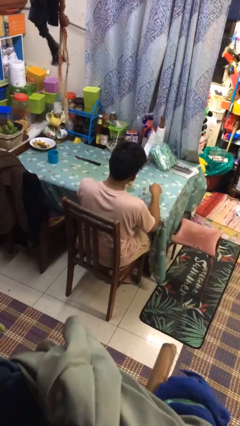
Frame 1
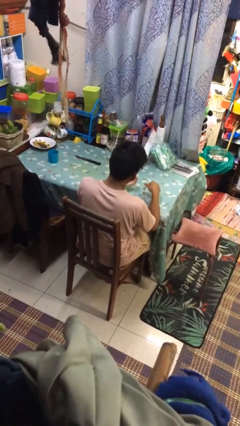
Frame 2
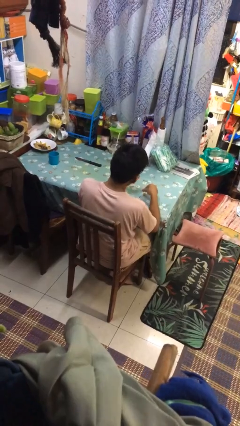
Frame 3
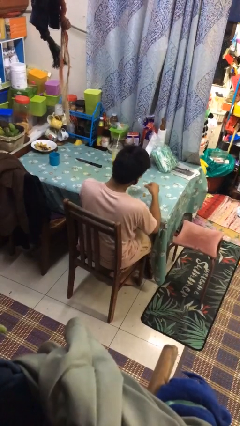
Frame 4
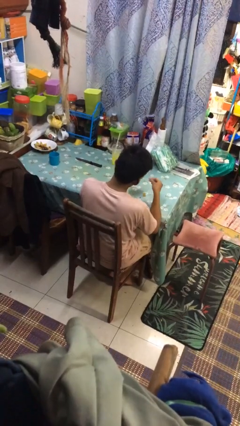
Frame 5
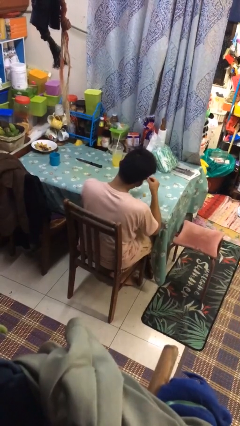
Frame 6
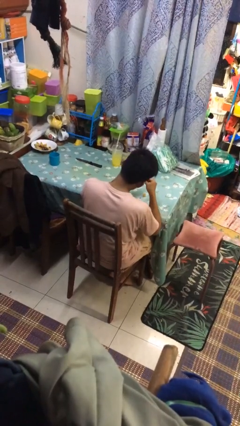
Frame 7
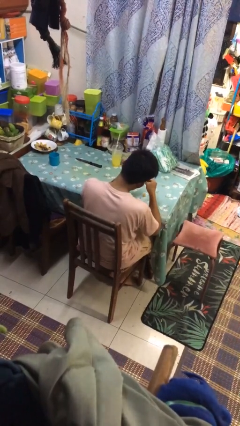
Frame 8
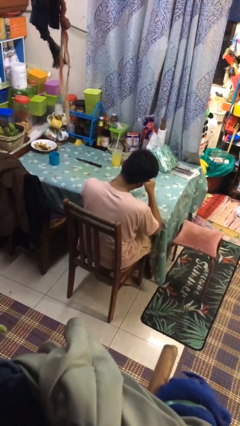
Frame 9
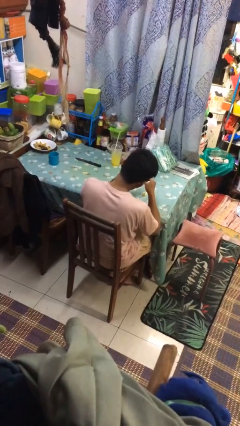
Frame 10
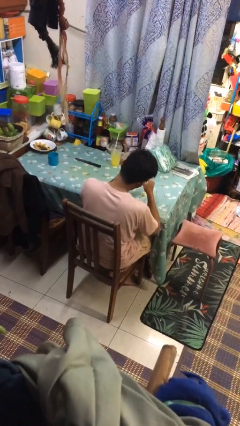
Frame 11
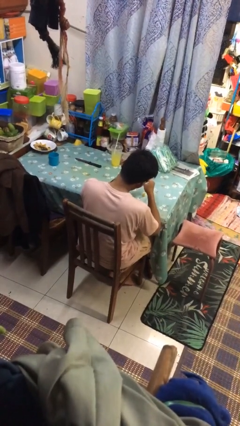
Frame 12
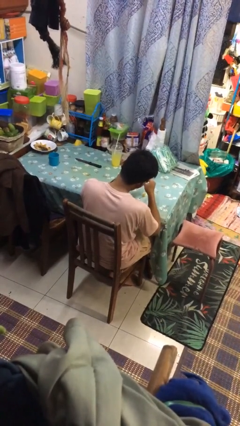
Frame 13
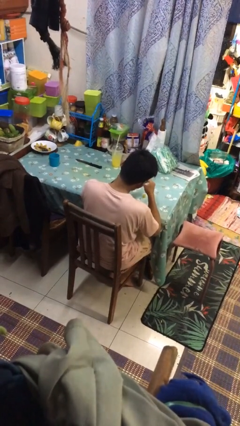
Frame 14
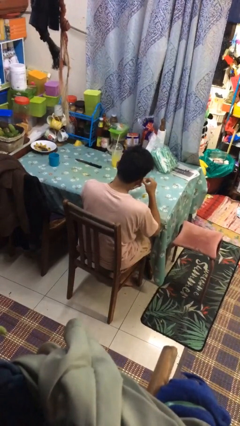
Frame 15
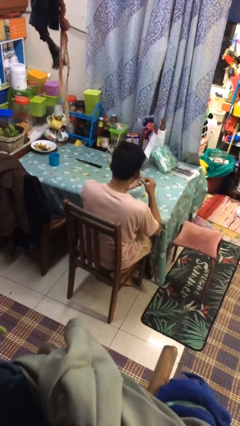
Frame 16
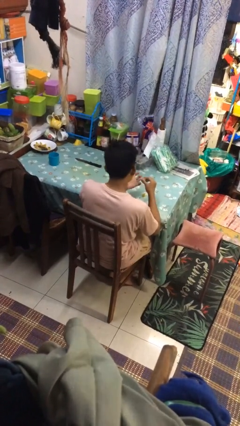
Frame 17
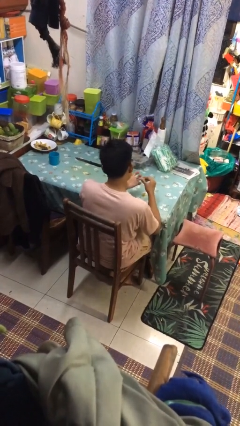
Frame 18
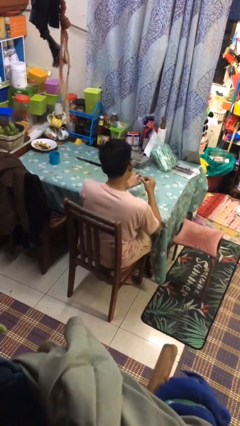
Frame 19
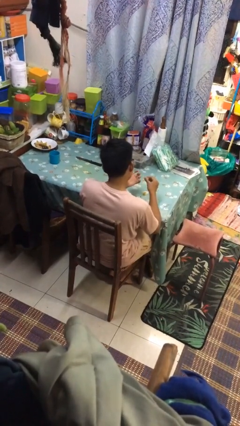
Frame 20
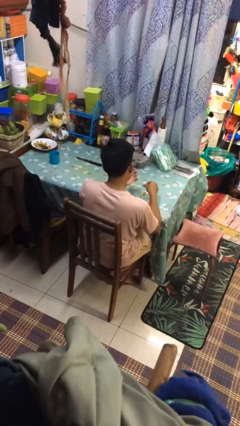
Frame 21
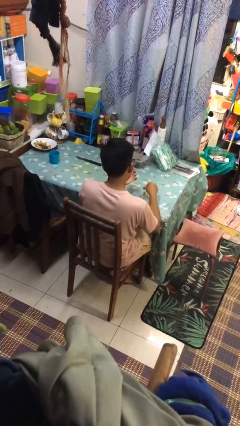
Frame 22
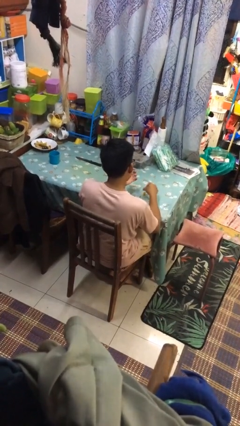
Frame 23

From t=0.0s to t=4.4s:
person paints fingernails

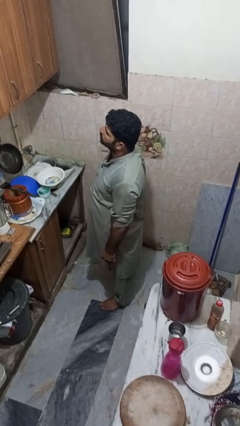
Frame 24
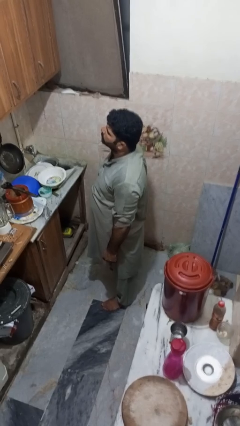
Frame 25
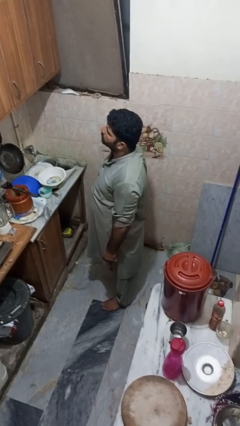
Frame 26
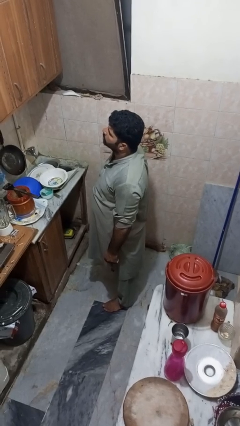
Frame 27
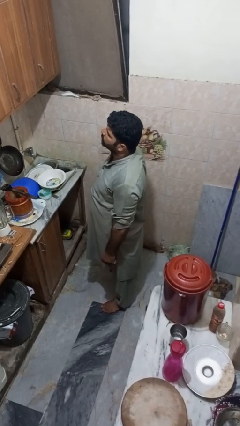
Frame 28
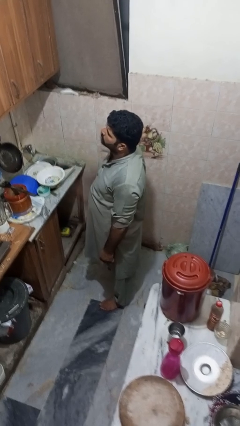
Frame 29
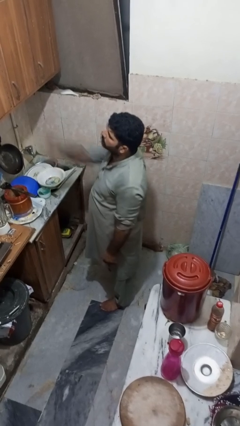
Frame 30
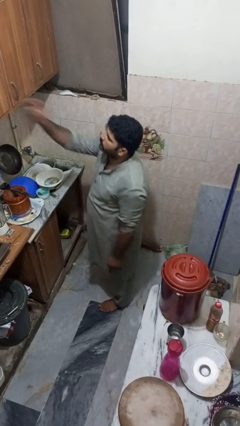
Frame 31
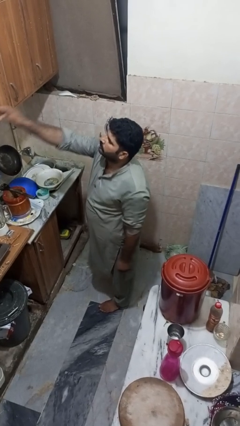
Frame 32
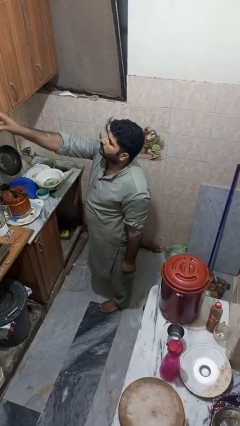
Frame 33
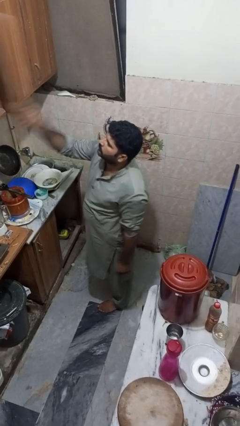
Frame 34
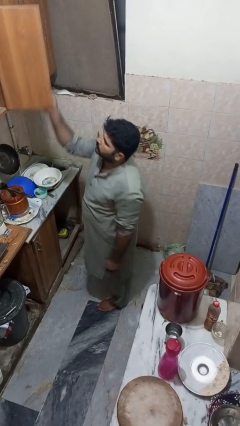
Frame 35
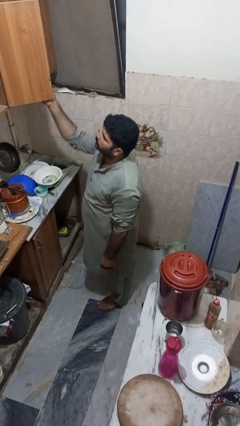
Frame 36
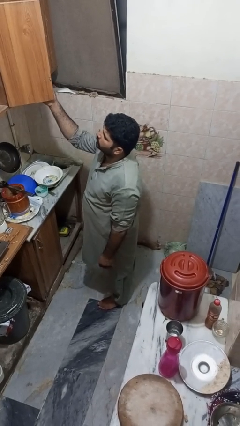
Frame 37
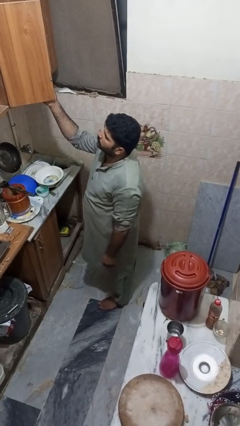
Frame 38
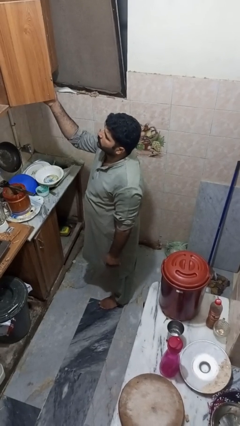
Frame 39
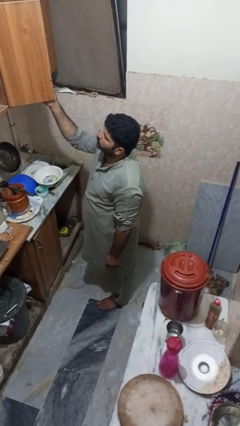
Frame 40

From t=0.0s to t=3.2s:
person opens cabinet

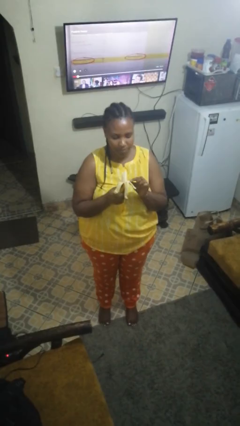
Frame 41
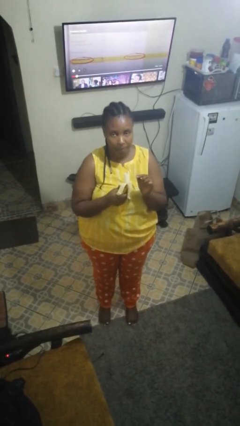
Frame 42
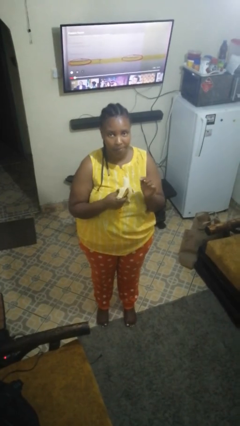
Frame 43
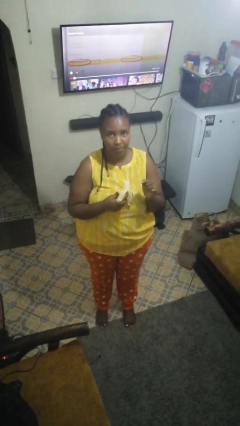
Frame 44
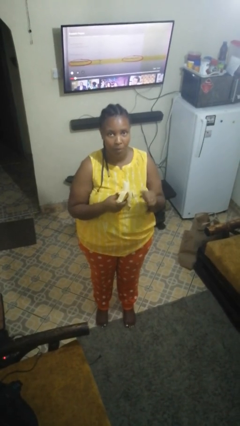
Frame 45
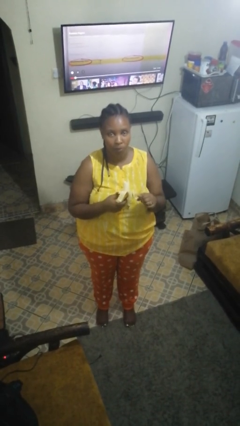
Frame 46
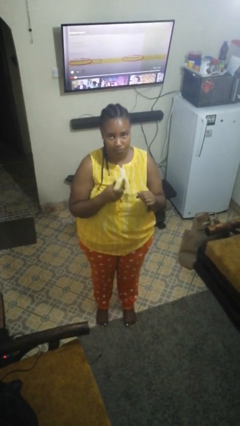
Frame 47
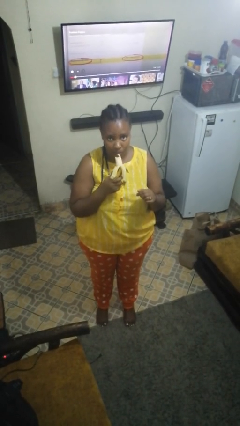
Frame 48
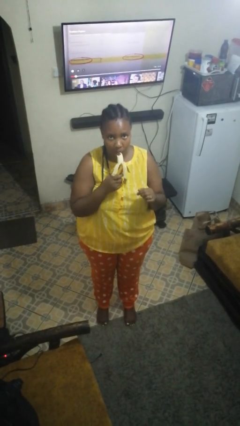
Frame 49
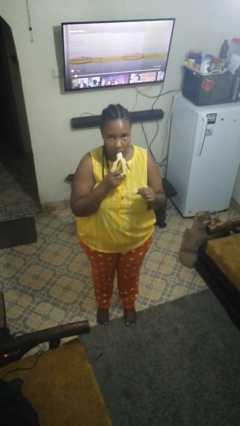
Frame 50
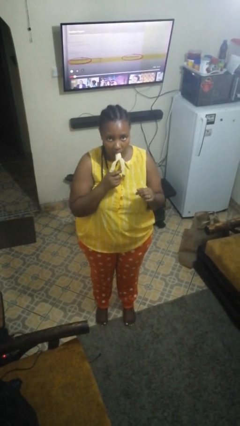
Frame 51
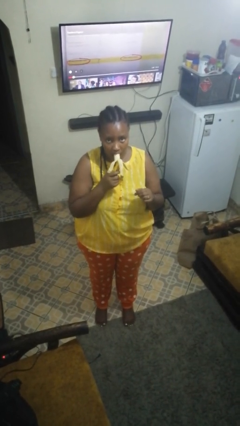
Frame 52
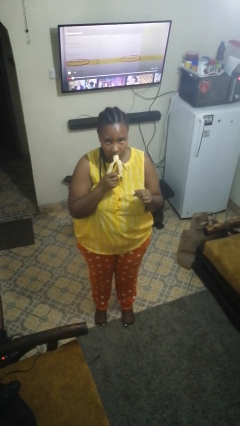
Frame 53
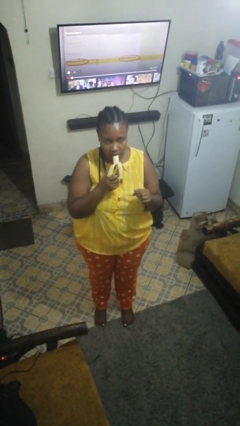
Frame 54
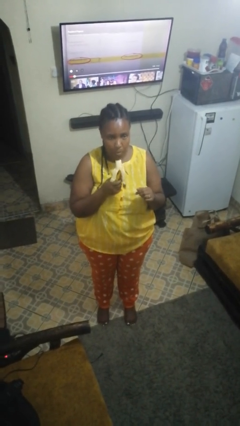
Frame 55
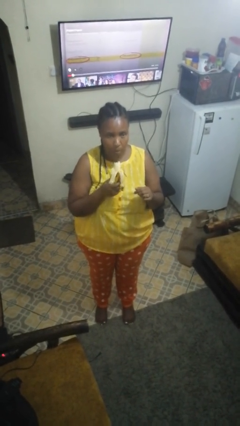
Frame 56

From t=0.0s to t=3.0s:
person eats banana

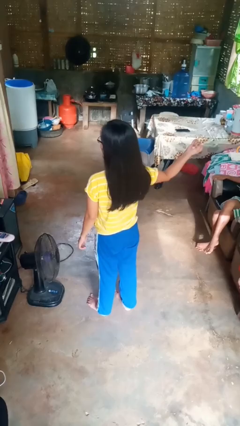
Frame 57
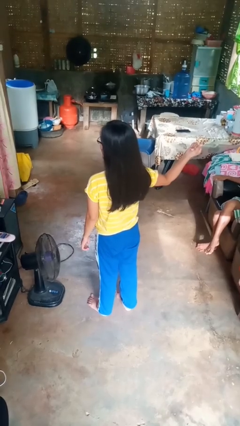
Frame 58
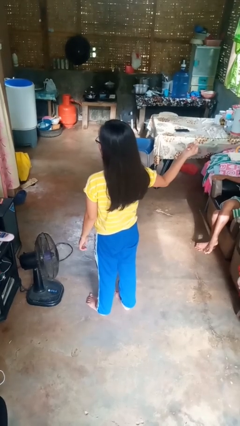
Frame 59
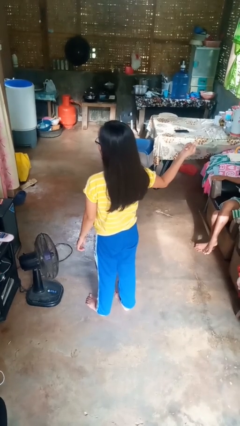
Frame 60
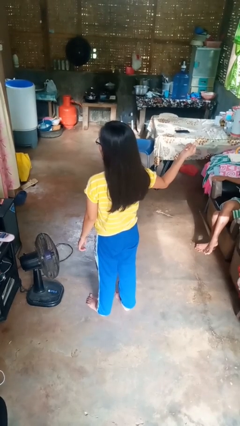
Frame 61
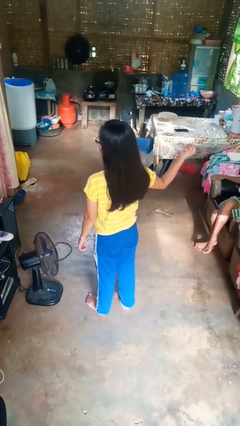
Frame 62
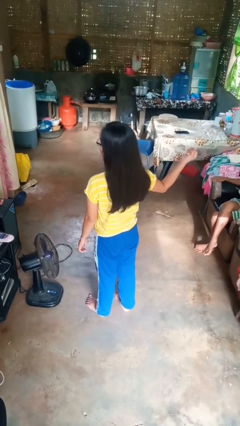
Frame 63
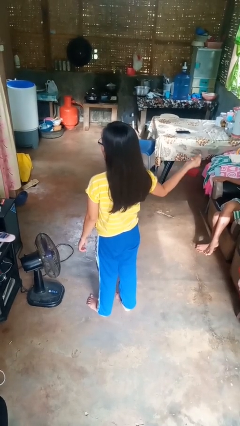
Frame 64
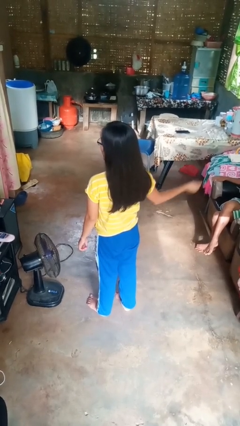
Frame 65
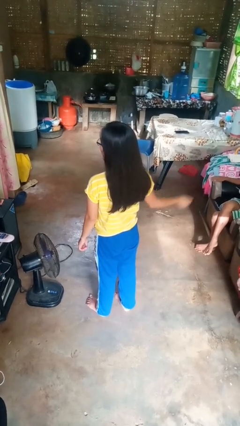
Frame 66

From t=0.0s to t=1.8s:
person snaps fingers

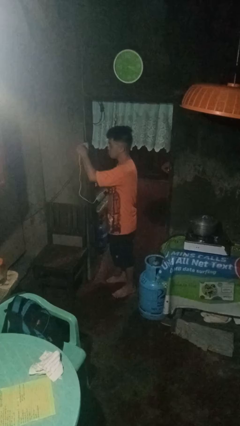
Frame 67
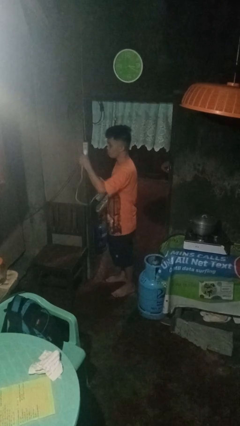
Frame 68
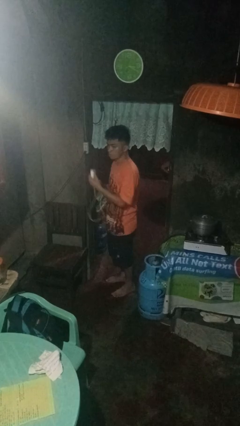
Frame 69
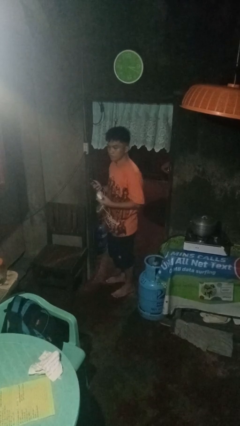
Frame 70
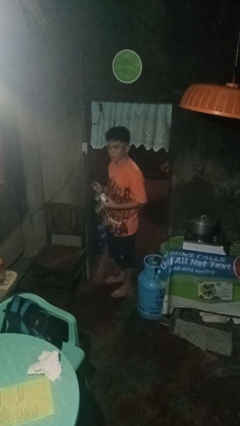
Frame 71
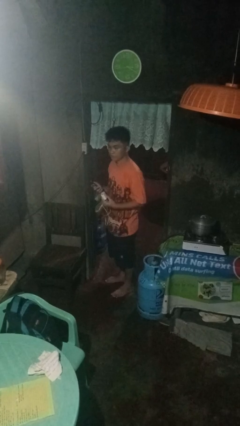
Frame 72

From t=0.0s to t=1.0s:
person unplugs from electrical socket

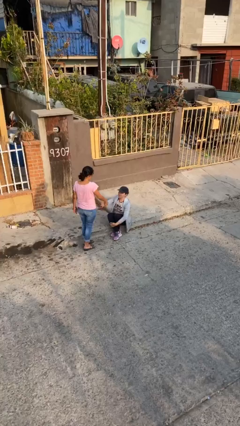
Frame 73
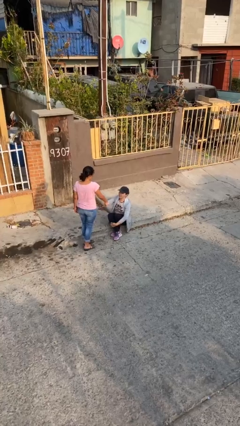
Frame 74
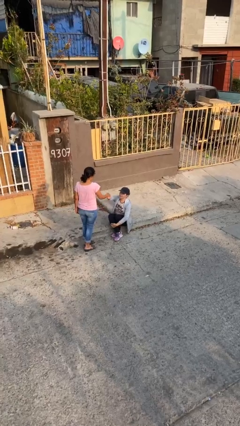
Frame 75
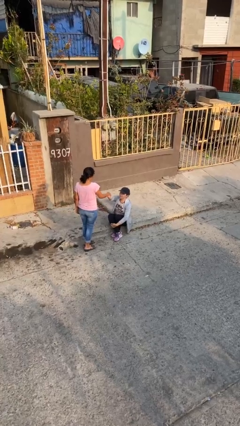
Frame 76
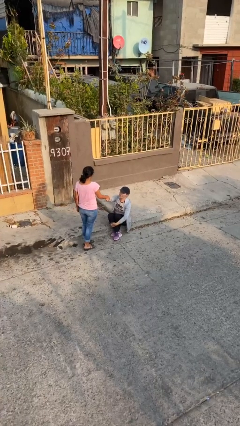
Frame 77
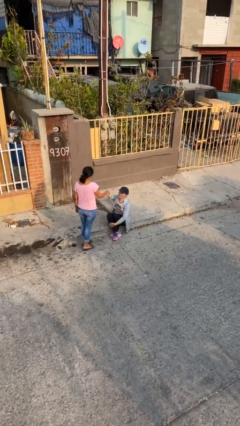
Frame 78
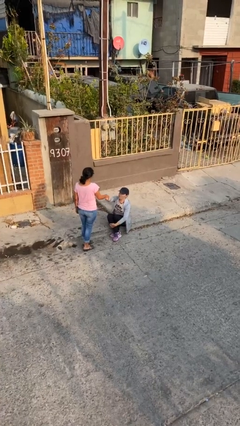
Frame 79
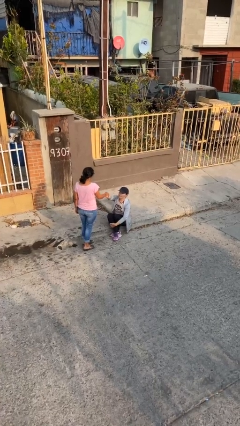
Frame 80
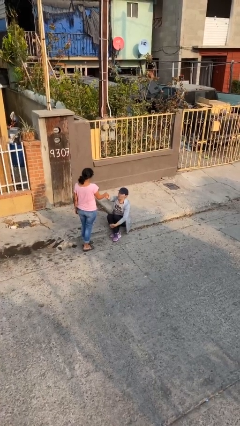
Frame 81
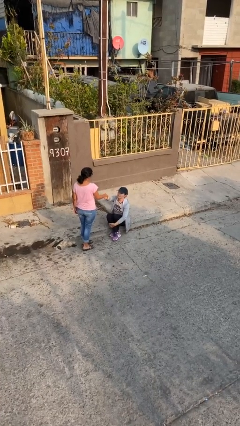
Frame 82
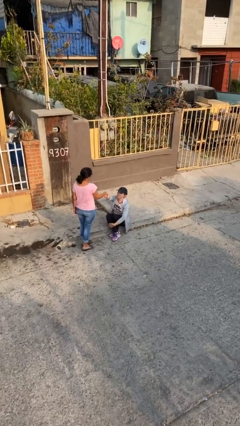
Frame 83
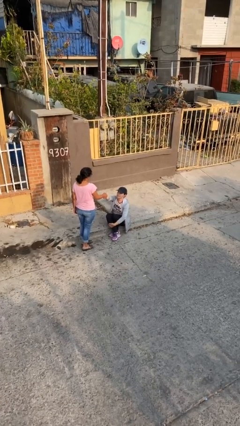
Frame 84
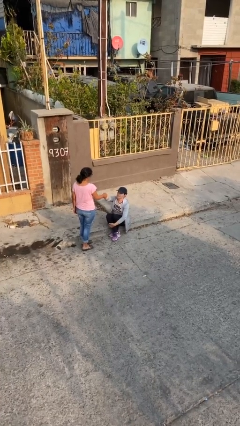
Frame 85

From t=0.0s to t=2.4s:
person shakes hand

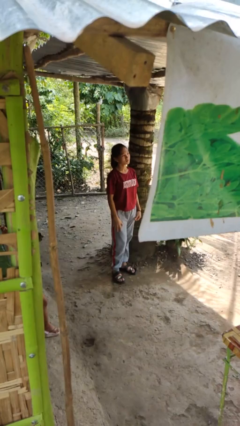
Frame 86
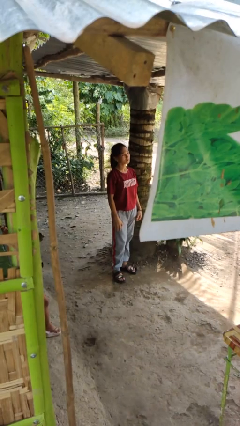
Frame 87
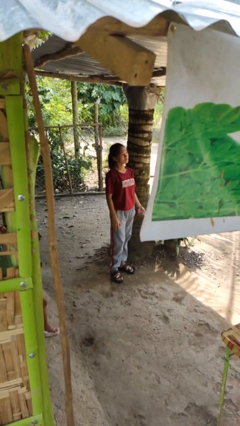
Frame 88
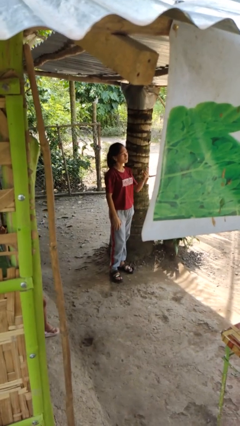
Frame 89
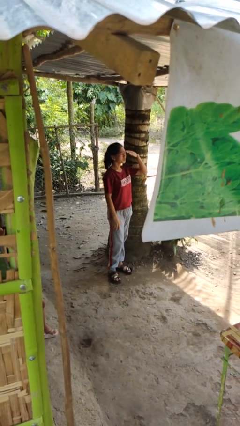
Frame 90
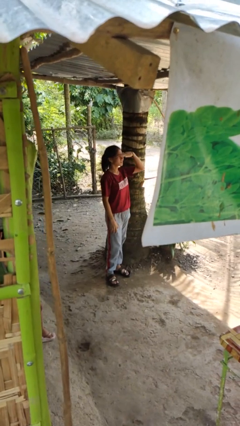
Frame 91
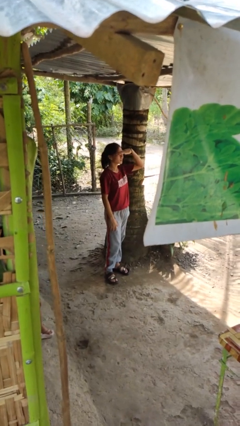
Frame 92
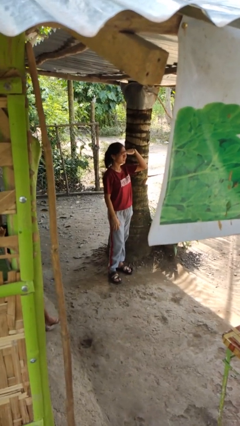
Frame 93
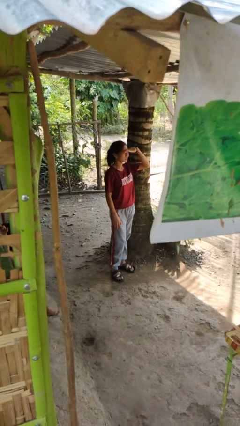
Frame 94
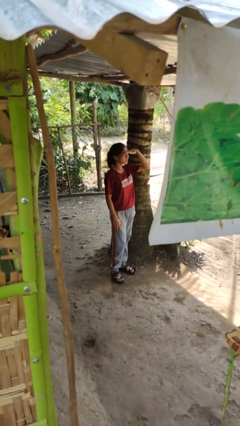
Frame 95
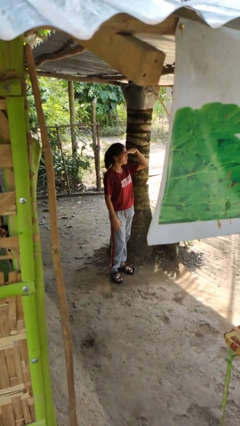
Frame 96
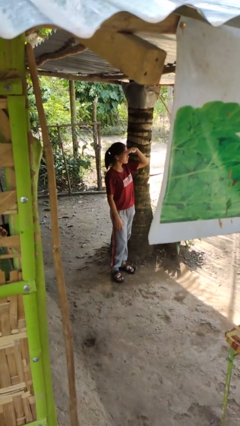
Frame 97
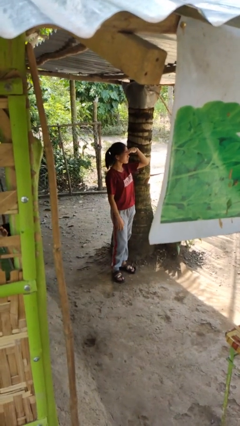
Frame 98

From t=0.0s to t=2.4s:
person shades eyes
